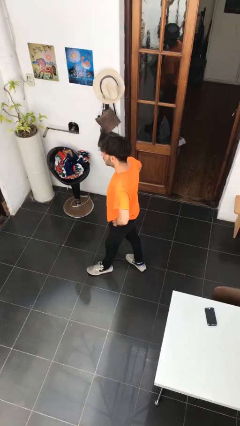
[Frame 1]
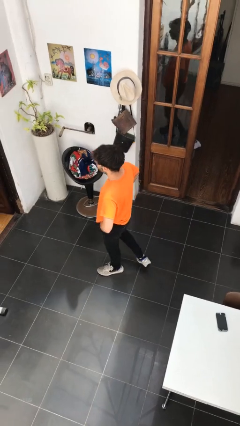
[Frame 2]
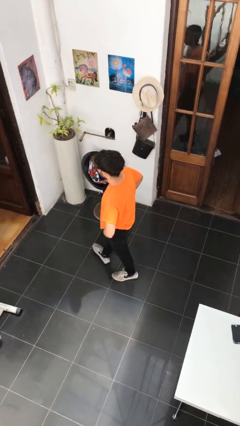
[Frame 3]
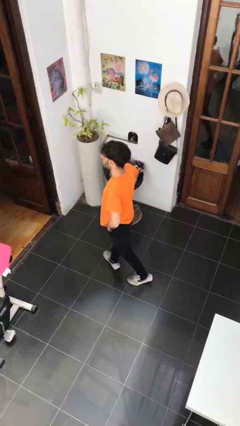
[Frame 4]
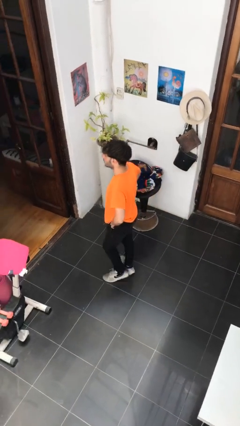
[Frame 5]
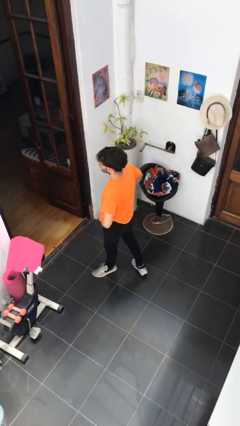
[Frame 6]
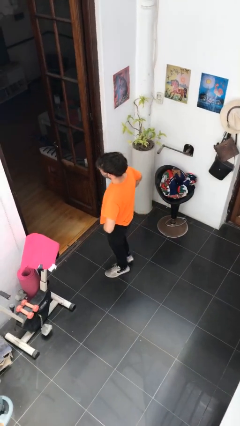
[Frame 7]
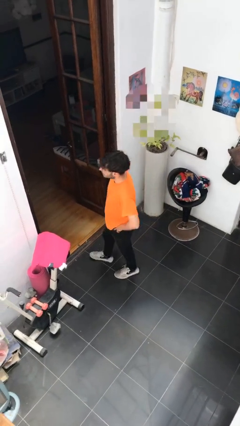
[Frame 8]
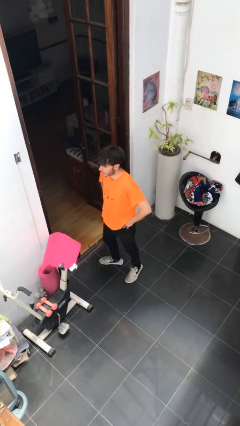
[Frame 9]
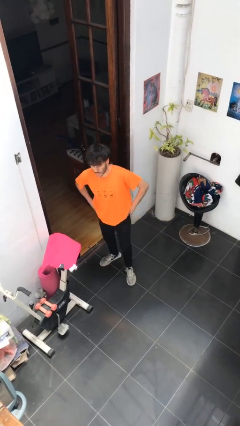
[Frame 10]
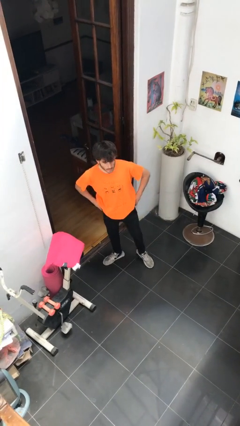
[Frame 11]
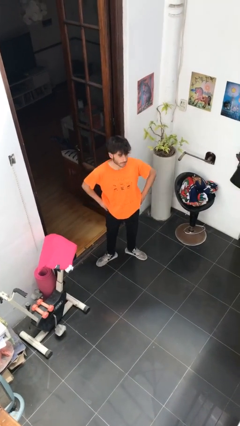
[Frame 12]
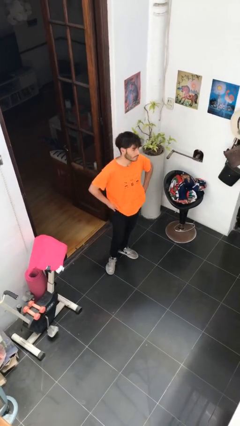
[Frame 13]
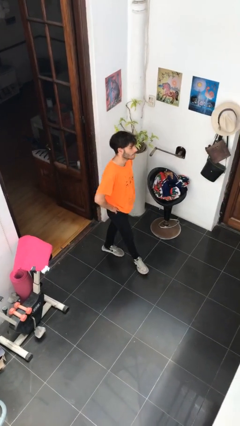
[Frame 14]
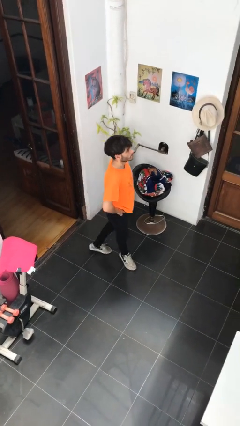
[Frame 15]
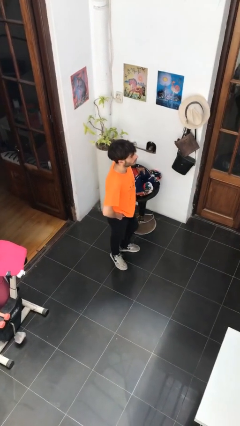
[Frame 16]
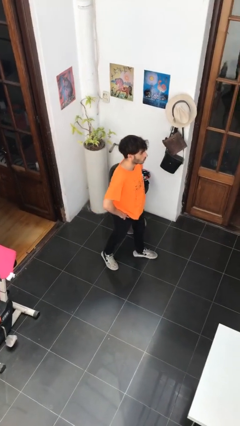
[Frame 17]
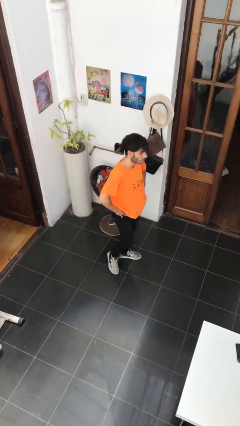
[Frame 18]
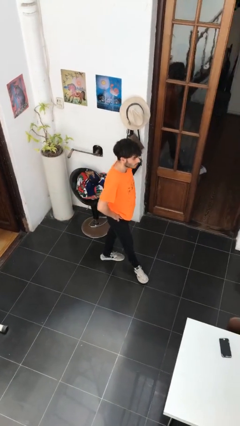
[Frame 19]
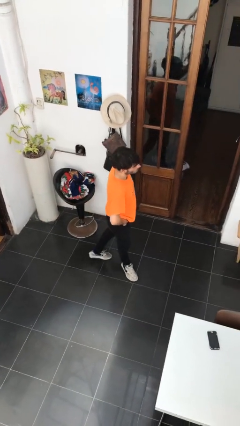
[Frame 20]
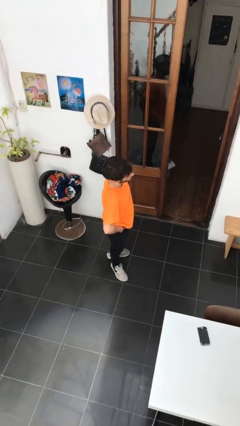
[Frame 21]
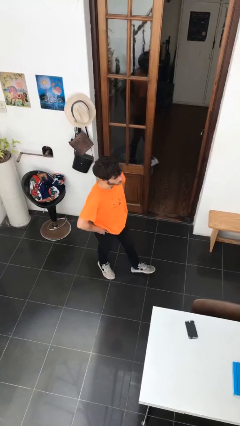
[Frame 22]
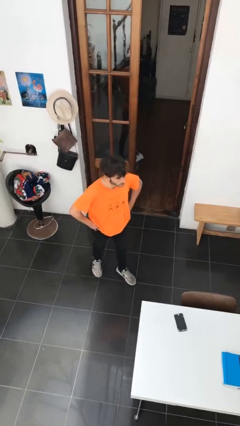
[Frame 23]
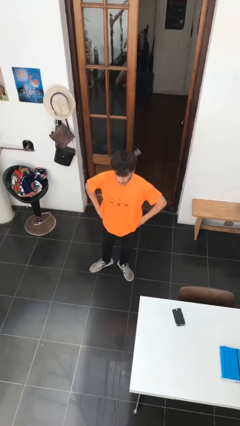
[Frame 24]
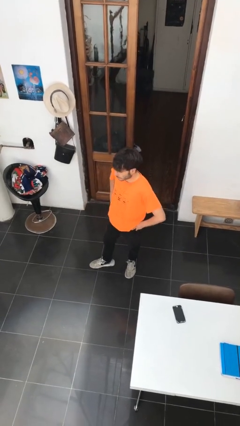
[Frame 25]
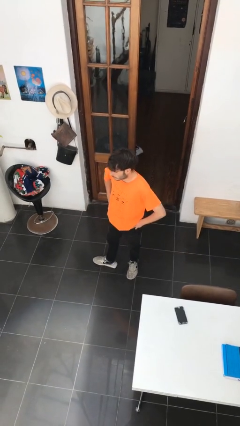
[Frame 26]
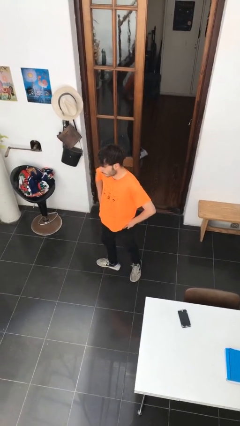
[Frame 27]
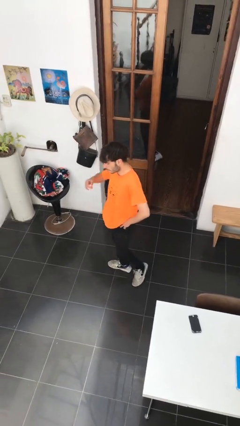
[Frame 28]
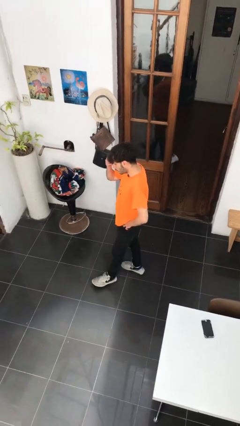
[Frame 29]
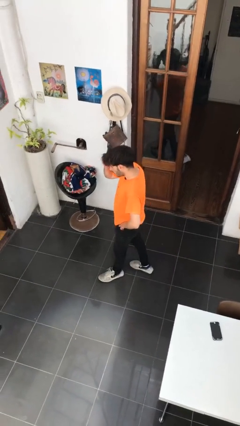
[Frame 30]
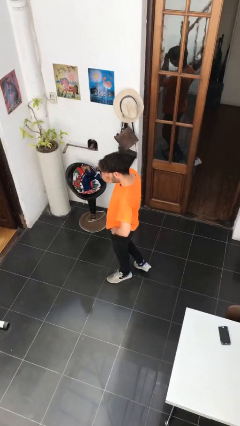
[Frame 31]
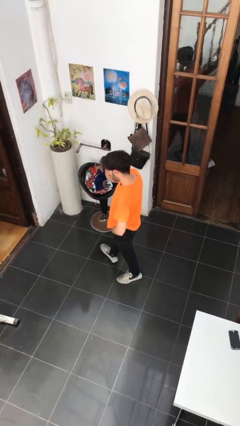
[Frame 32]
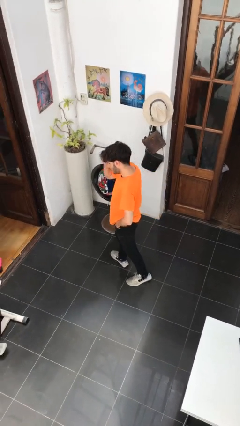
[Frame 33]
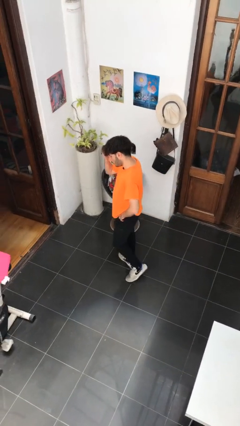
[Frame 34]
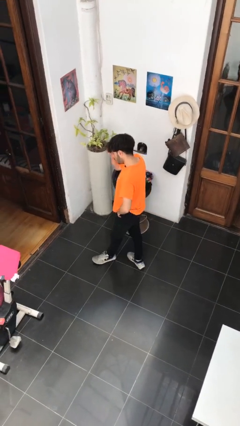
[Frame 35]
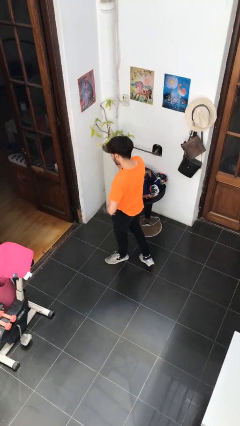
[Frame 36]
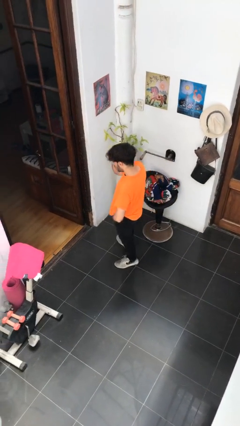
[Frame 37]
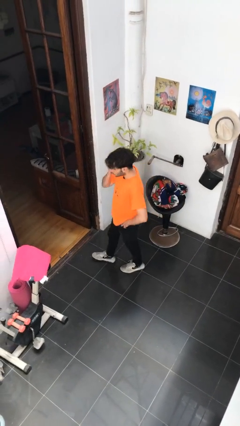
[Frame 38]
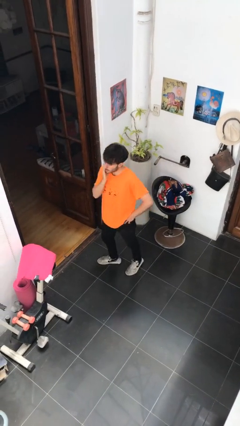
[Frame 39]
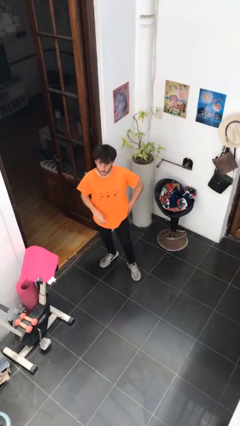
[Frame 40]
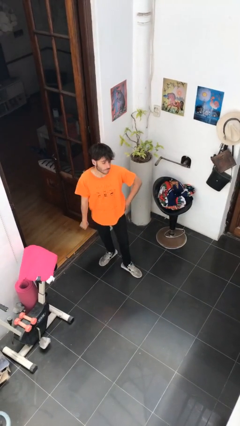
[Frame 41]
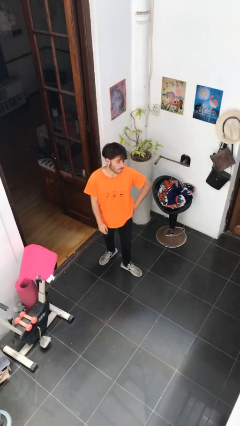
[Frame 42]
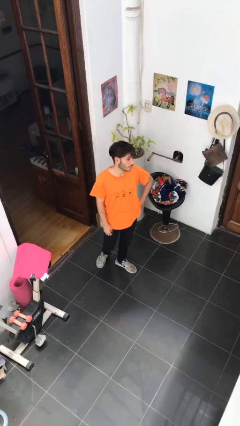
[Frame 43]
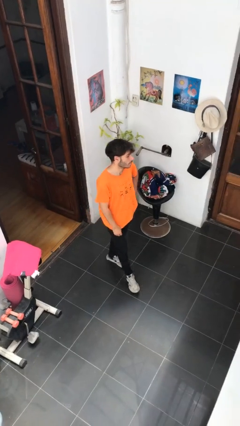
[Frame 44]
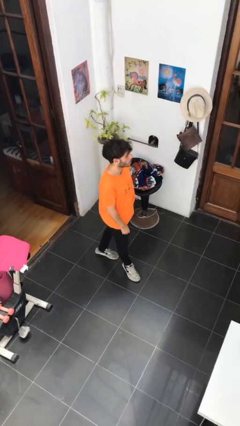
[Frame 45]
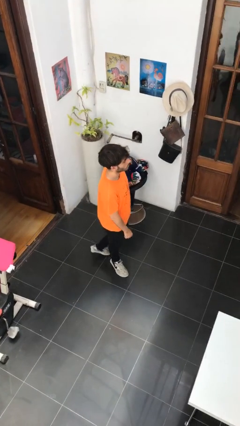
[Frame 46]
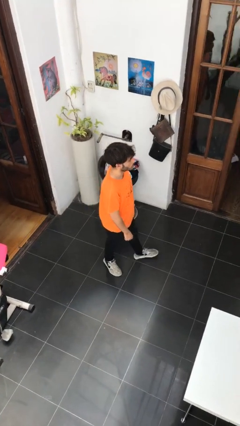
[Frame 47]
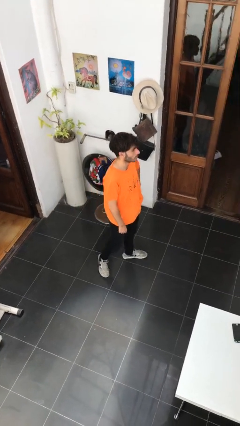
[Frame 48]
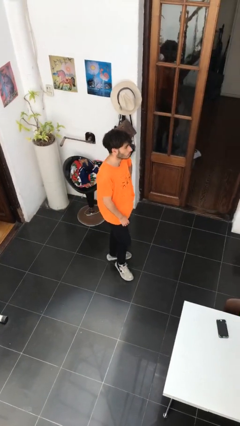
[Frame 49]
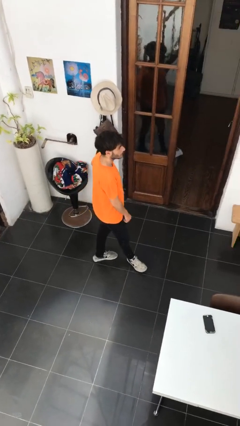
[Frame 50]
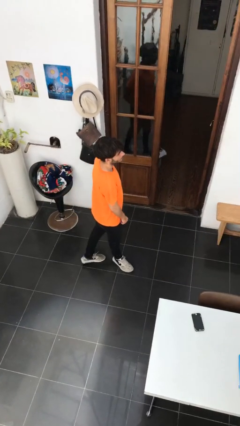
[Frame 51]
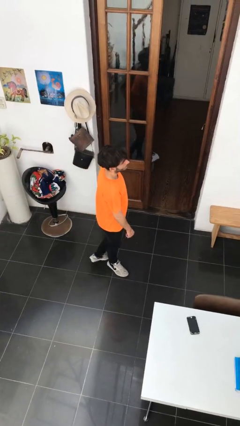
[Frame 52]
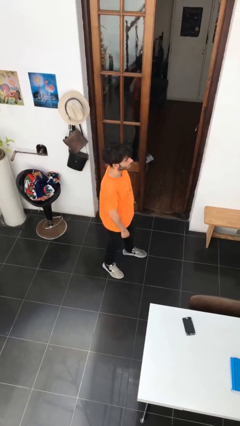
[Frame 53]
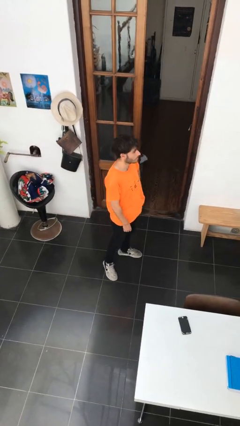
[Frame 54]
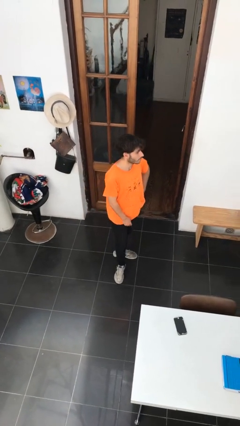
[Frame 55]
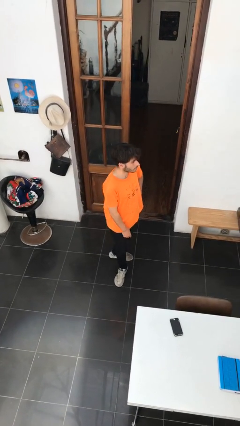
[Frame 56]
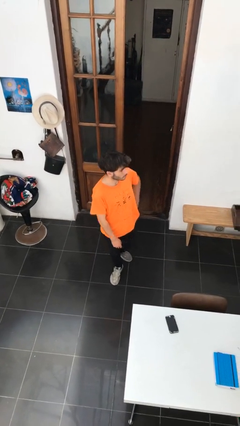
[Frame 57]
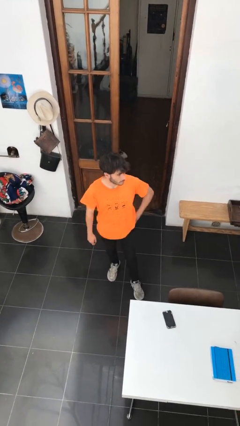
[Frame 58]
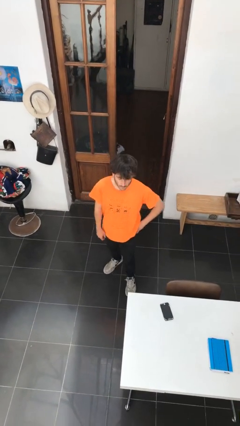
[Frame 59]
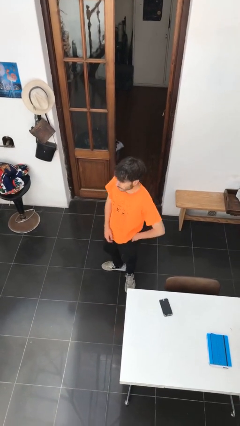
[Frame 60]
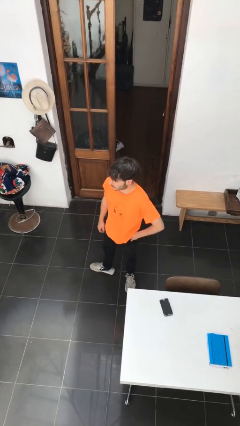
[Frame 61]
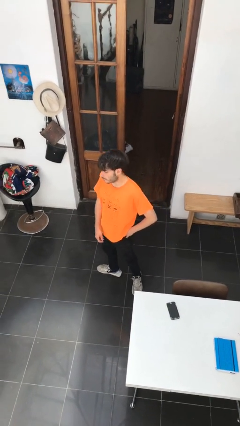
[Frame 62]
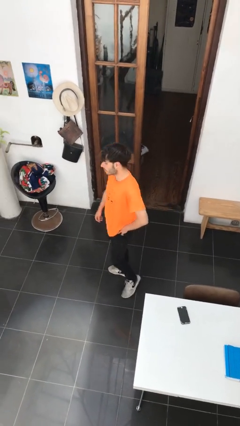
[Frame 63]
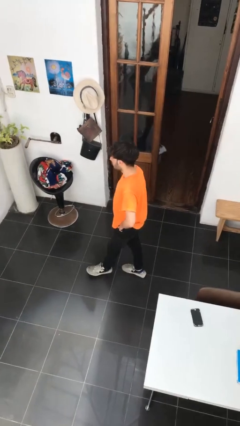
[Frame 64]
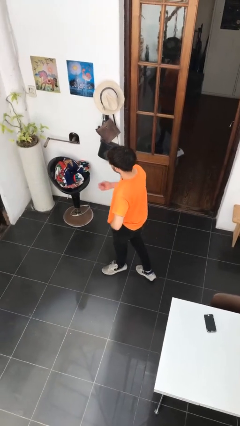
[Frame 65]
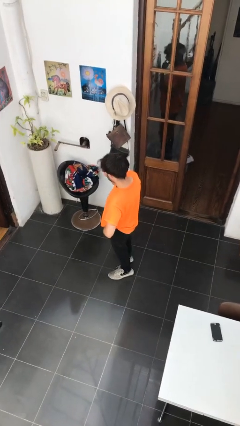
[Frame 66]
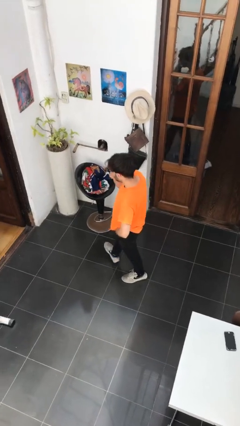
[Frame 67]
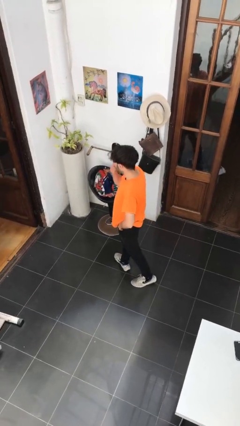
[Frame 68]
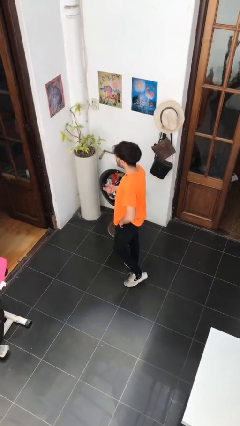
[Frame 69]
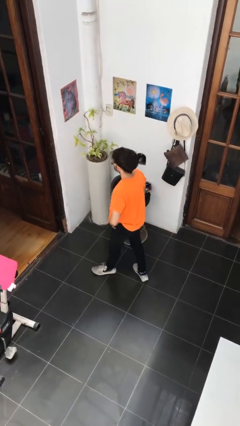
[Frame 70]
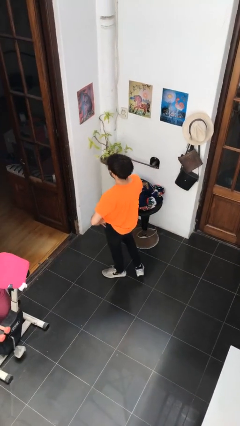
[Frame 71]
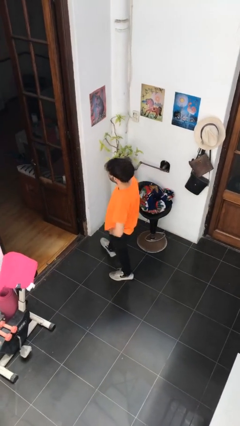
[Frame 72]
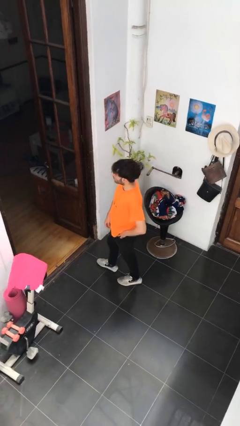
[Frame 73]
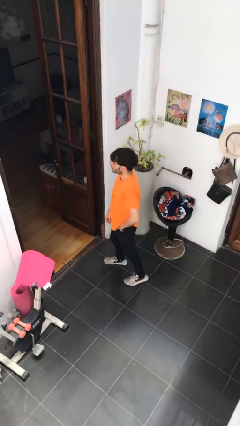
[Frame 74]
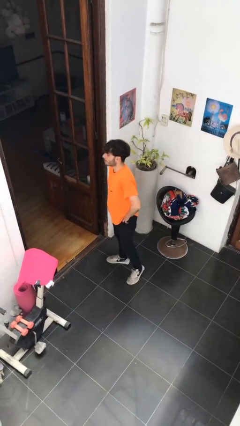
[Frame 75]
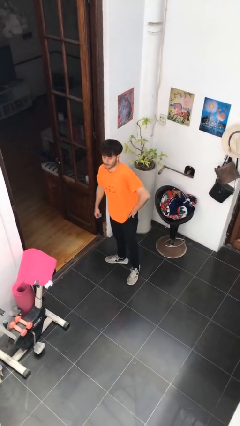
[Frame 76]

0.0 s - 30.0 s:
person walks

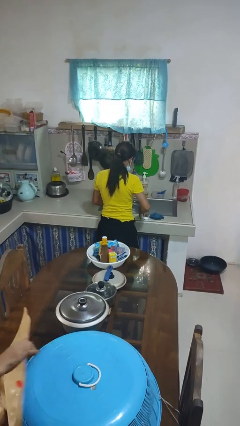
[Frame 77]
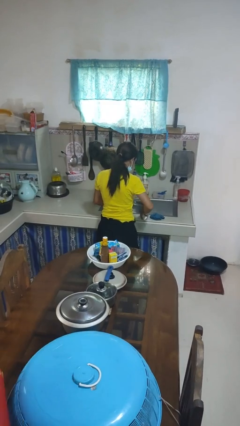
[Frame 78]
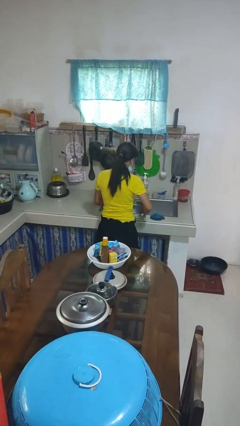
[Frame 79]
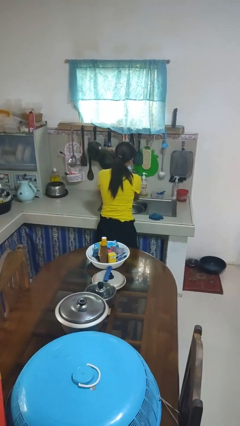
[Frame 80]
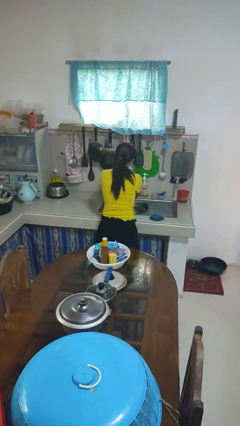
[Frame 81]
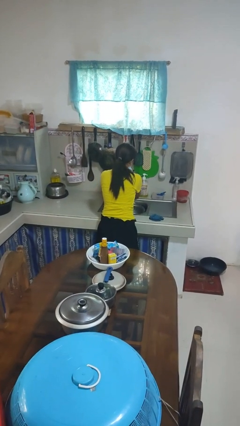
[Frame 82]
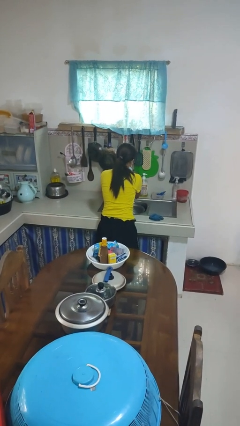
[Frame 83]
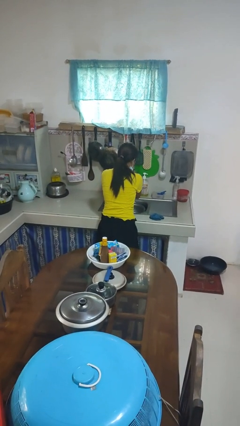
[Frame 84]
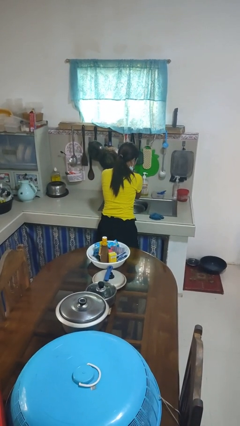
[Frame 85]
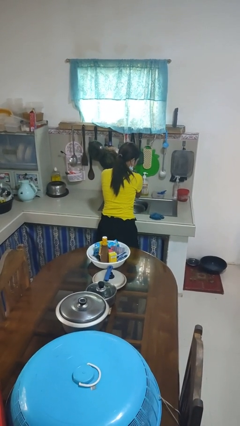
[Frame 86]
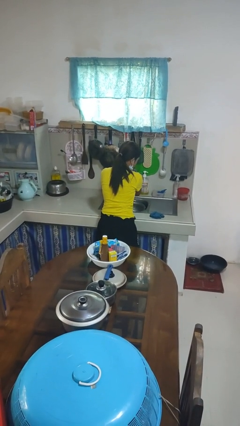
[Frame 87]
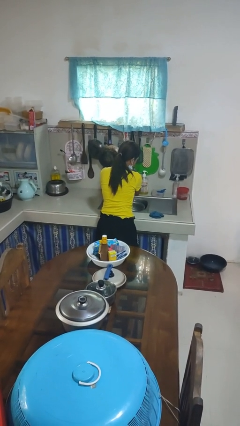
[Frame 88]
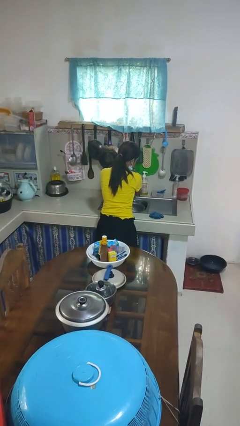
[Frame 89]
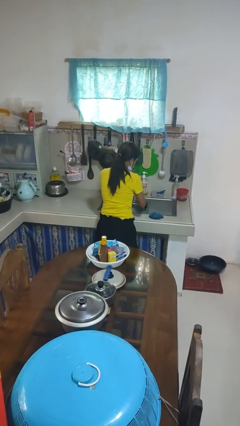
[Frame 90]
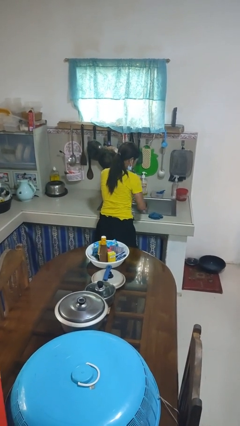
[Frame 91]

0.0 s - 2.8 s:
person washes hands

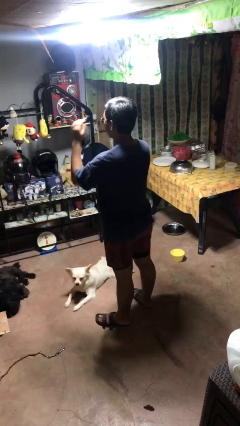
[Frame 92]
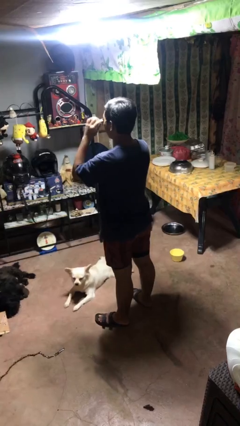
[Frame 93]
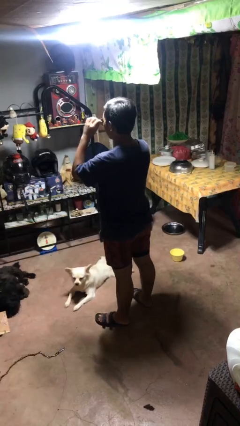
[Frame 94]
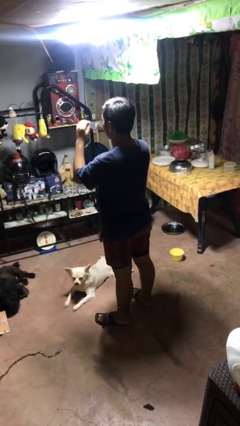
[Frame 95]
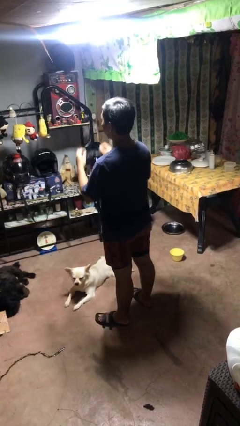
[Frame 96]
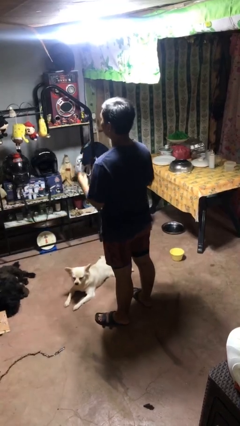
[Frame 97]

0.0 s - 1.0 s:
person takes off sunglasses
